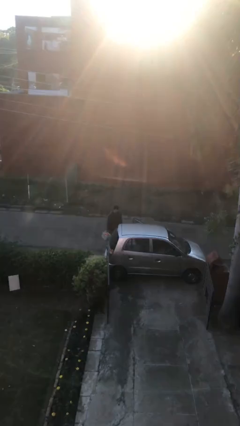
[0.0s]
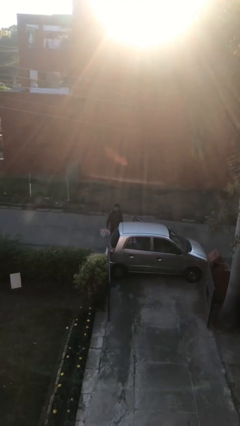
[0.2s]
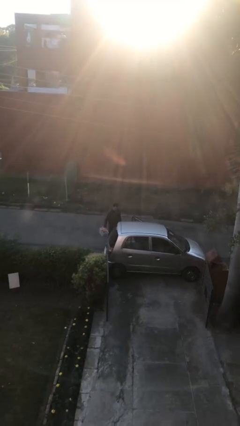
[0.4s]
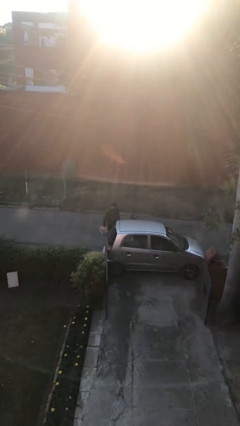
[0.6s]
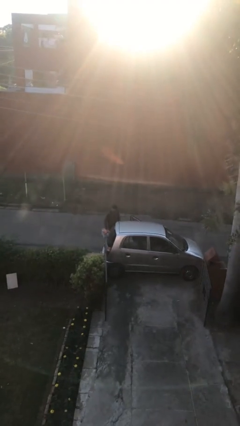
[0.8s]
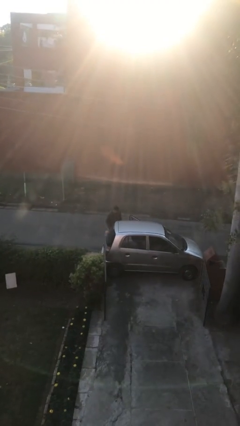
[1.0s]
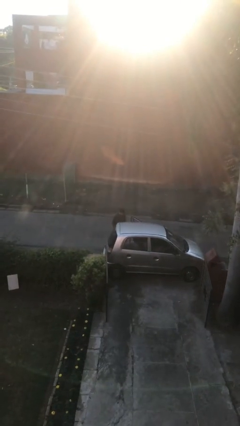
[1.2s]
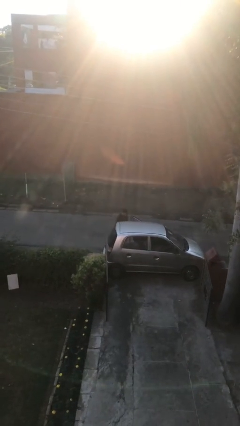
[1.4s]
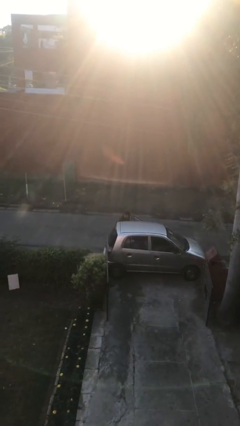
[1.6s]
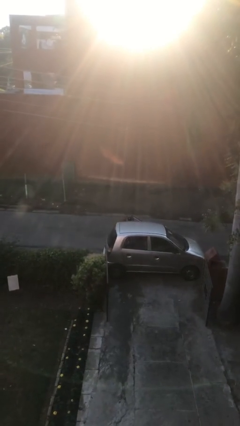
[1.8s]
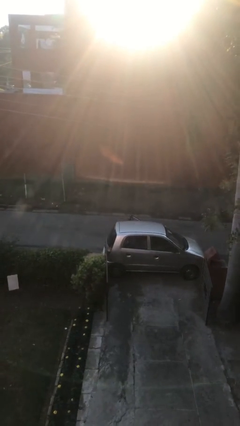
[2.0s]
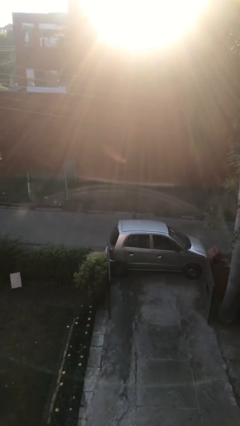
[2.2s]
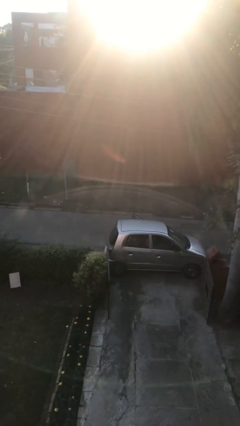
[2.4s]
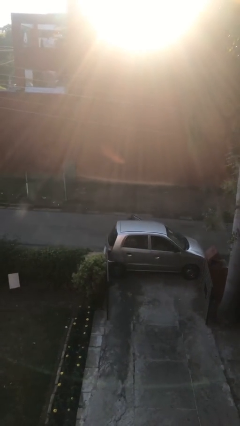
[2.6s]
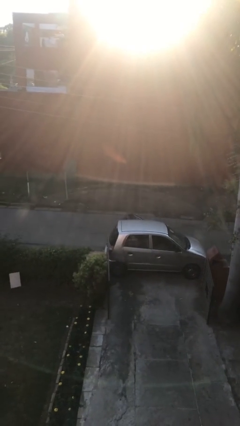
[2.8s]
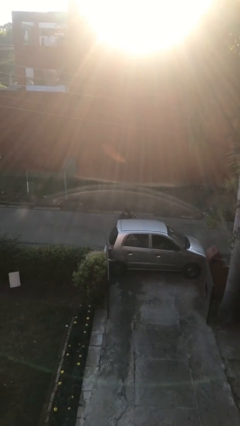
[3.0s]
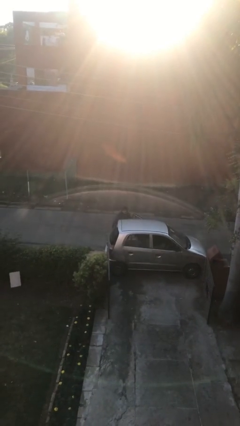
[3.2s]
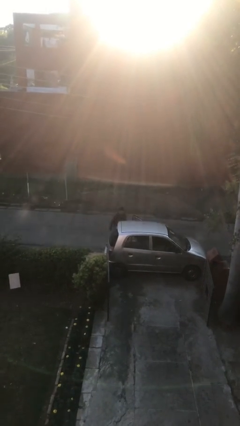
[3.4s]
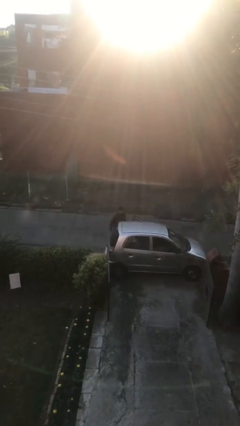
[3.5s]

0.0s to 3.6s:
person loads car

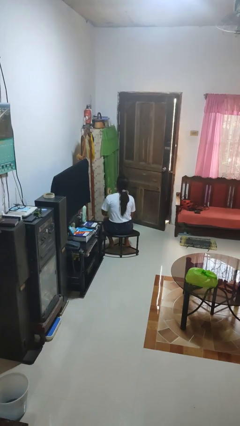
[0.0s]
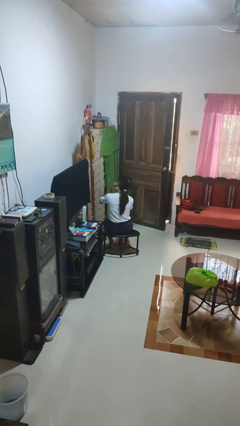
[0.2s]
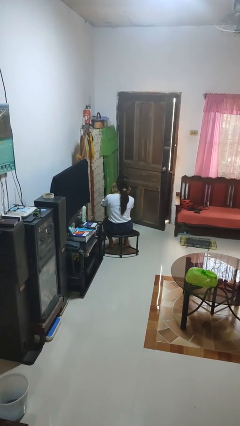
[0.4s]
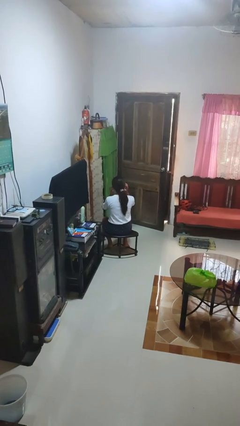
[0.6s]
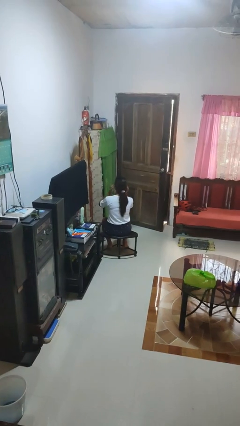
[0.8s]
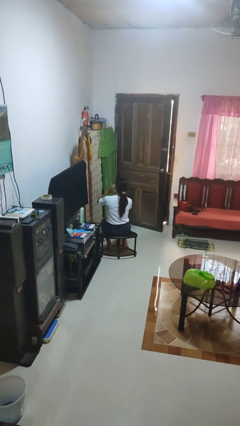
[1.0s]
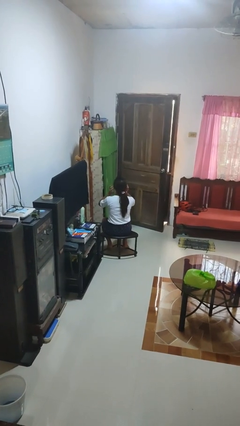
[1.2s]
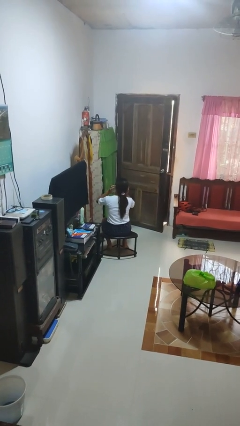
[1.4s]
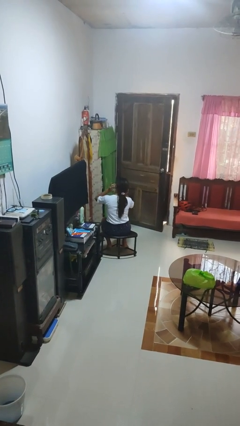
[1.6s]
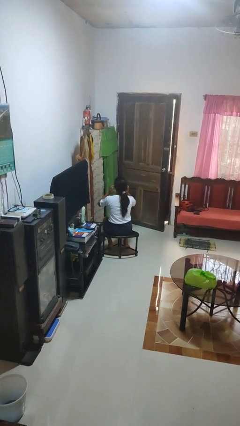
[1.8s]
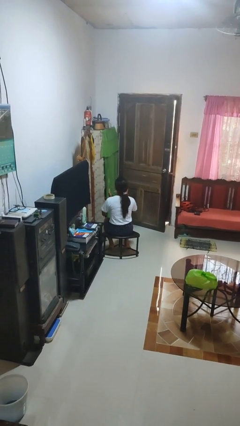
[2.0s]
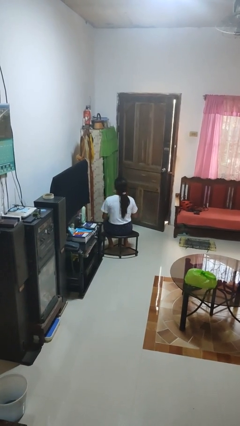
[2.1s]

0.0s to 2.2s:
person puts fingers in ear

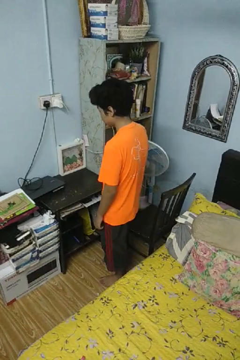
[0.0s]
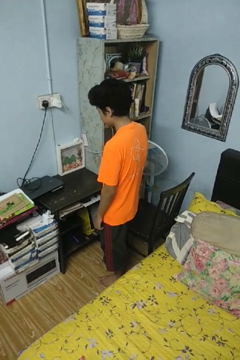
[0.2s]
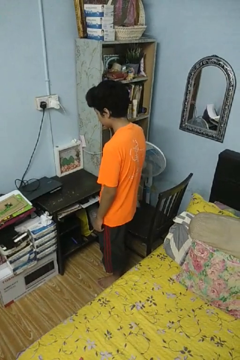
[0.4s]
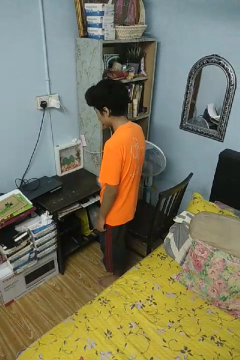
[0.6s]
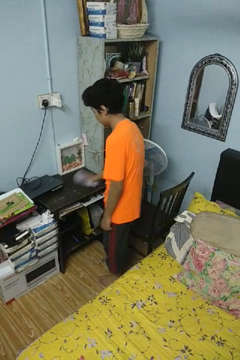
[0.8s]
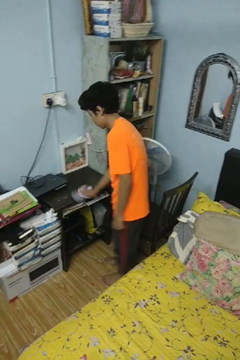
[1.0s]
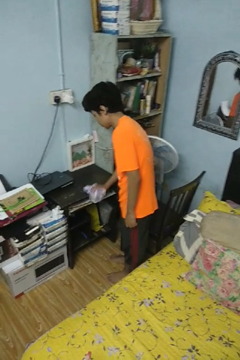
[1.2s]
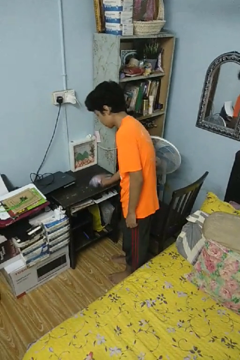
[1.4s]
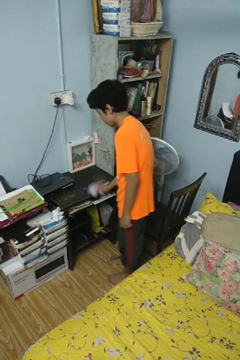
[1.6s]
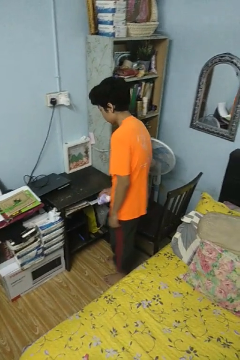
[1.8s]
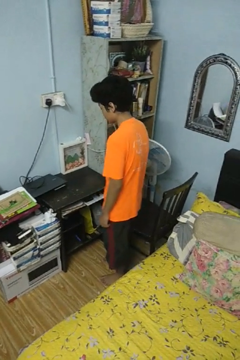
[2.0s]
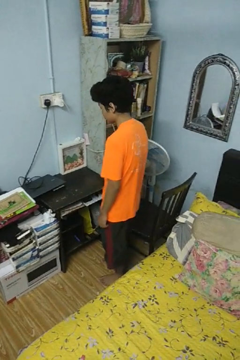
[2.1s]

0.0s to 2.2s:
person cleans table with rag

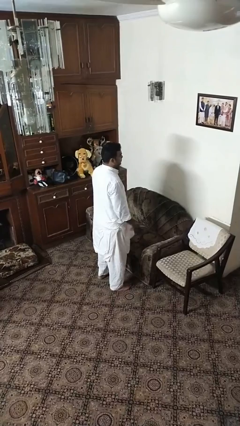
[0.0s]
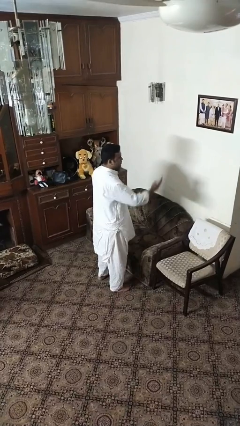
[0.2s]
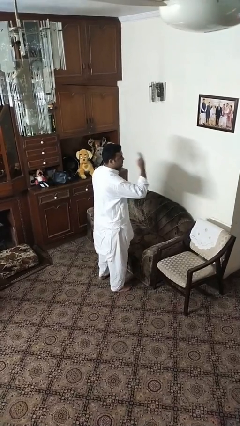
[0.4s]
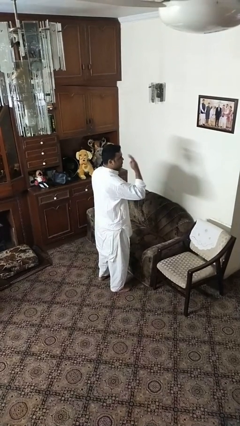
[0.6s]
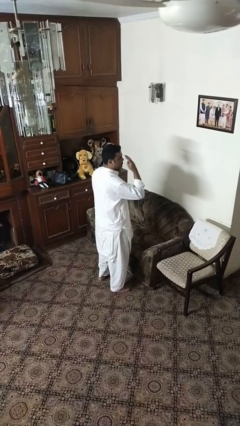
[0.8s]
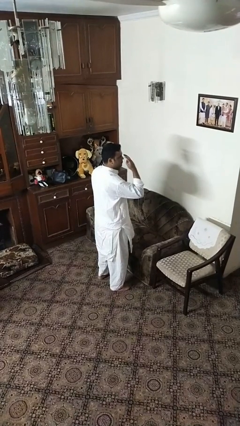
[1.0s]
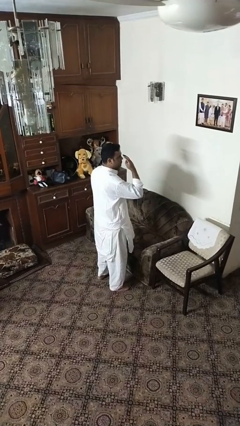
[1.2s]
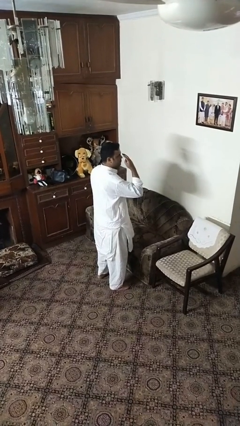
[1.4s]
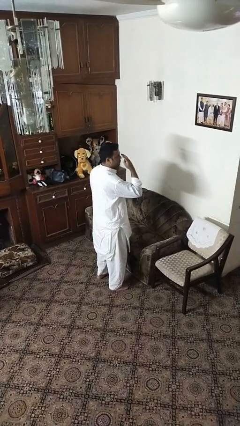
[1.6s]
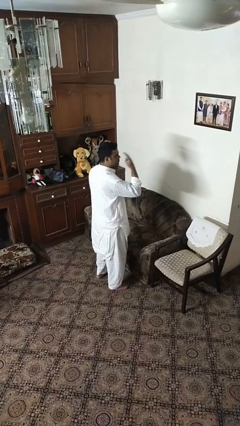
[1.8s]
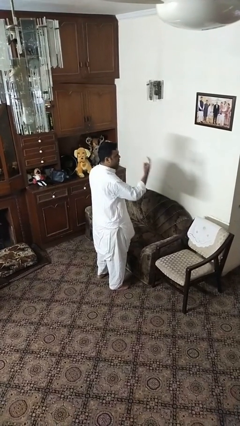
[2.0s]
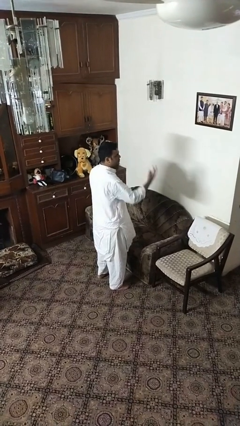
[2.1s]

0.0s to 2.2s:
person gestures watch closely

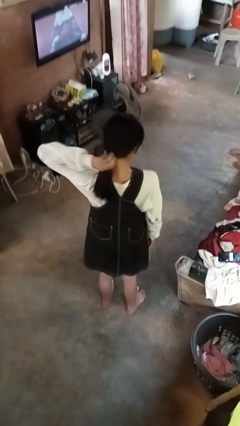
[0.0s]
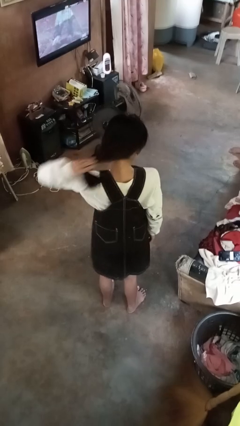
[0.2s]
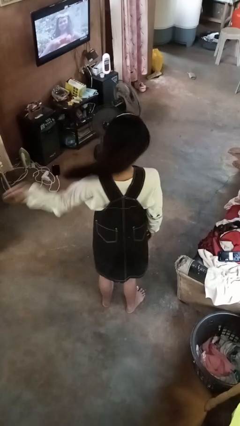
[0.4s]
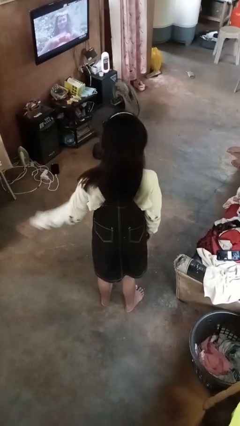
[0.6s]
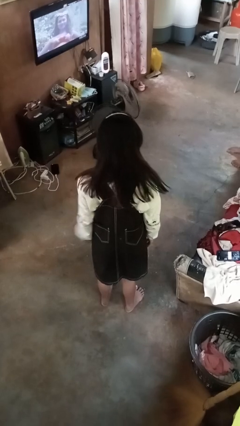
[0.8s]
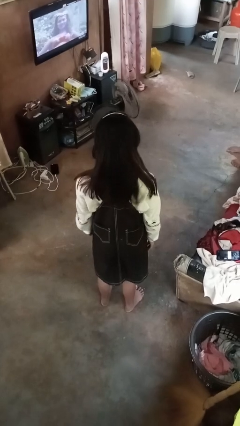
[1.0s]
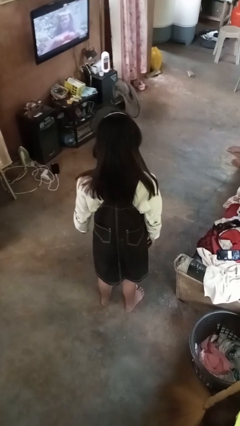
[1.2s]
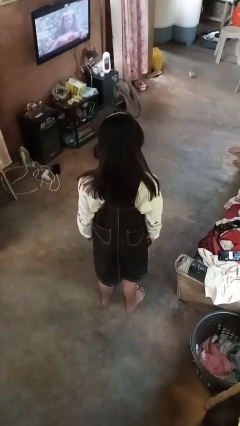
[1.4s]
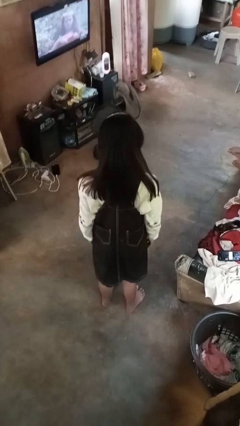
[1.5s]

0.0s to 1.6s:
person takes off hairtie

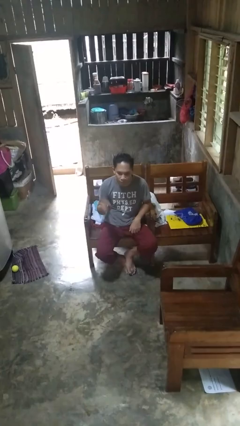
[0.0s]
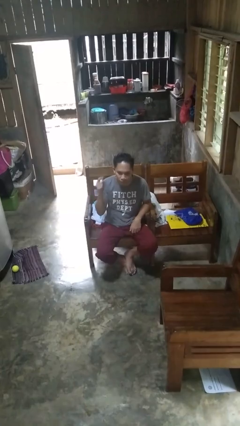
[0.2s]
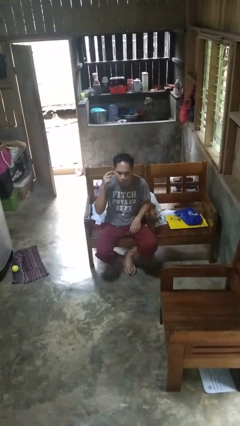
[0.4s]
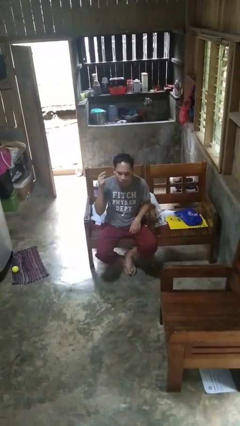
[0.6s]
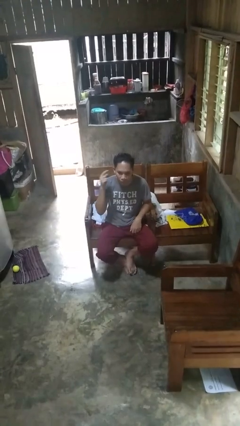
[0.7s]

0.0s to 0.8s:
person gestures listen closely

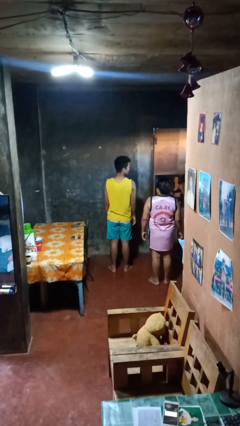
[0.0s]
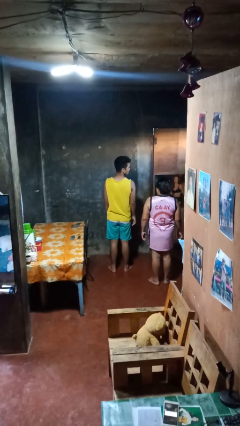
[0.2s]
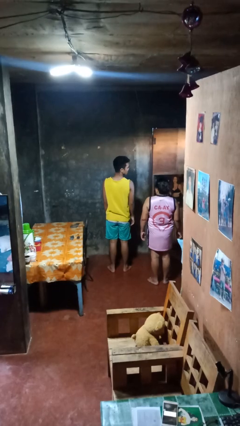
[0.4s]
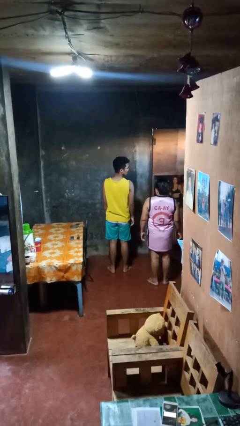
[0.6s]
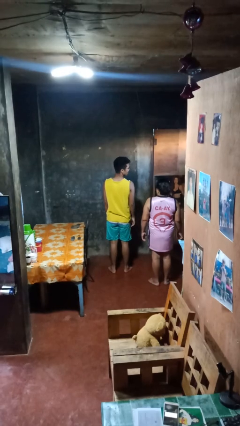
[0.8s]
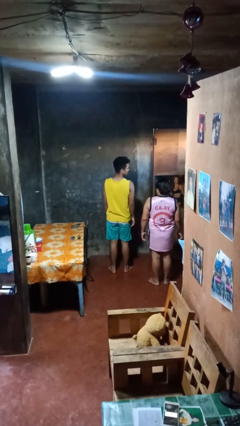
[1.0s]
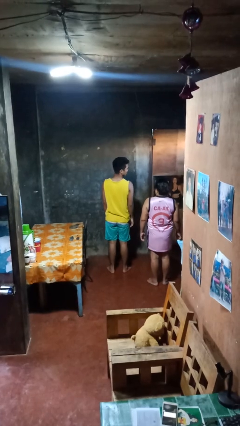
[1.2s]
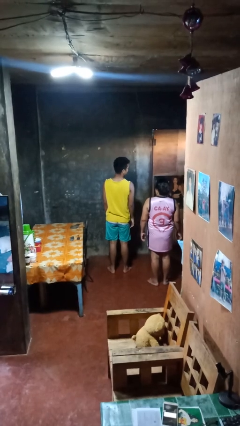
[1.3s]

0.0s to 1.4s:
person looks over shoulder

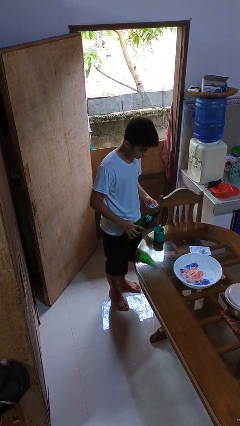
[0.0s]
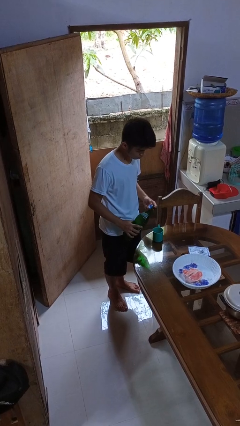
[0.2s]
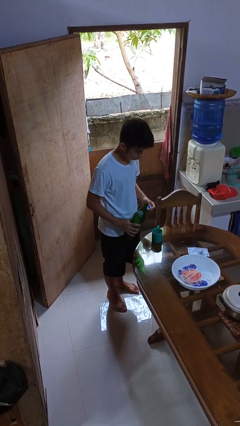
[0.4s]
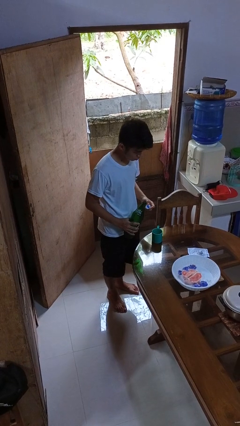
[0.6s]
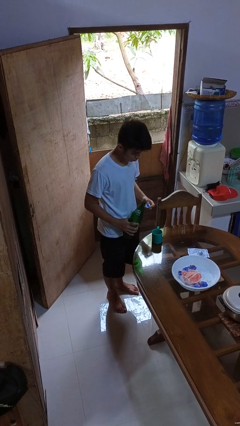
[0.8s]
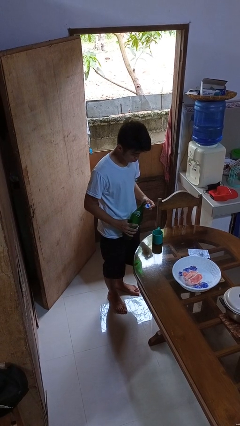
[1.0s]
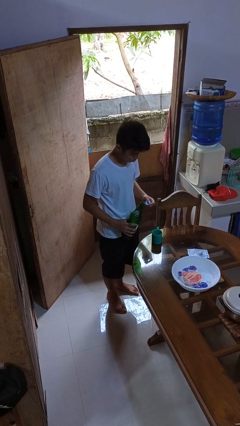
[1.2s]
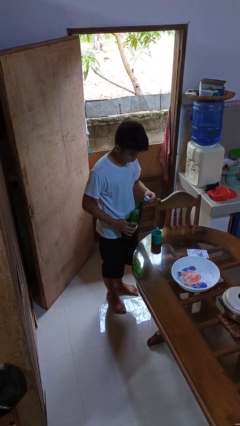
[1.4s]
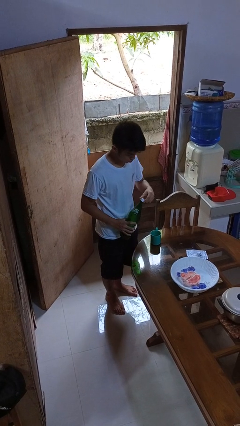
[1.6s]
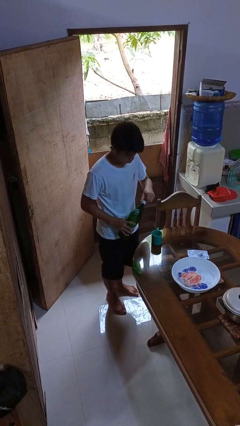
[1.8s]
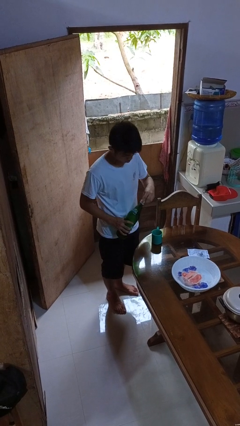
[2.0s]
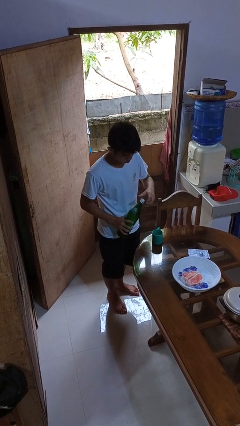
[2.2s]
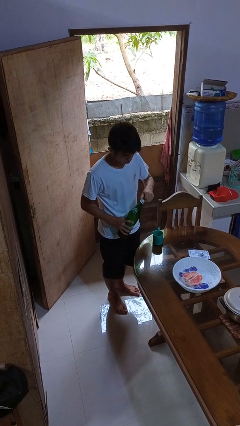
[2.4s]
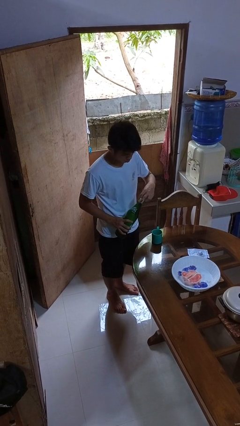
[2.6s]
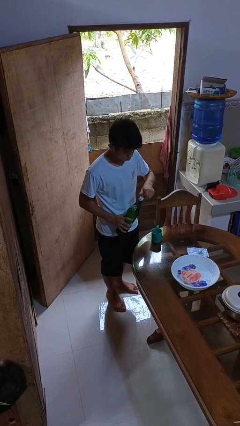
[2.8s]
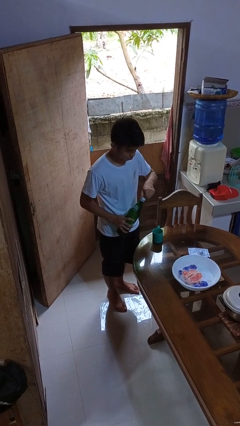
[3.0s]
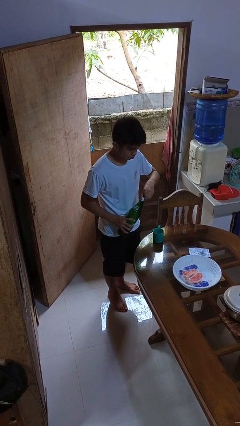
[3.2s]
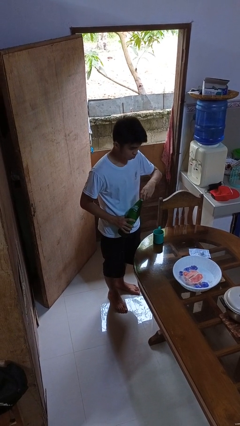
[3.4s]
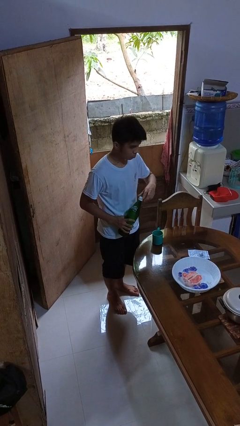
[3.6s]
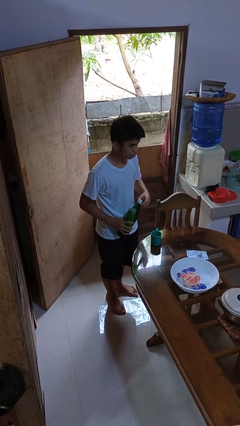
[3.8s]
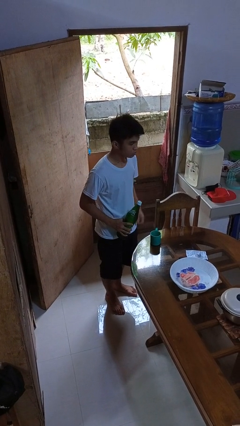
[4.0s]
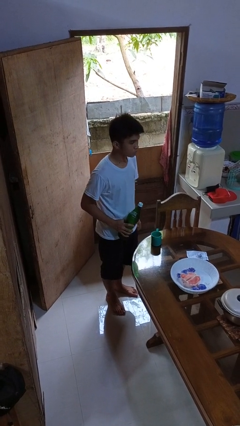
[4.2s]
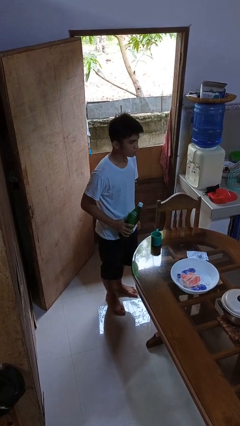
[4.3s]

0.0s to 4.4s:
person screws lid to bottle
